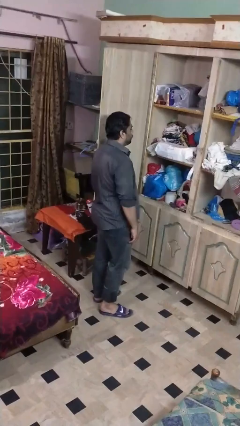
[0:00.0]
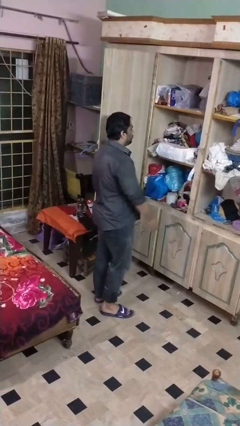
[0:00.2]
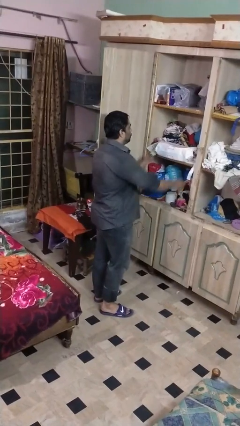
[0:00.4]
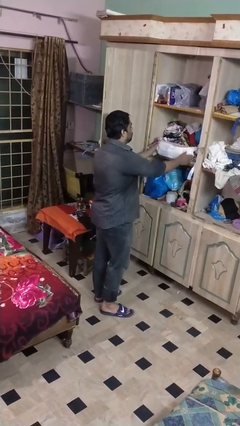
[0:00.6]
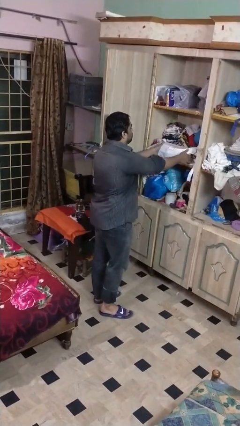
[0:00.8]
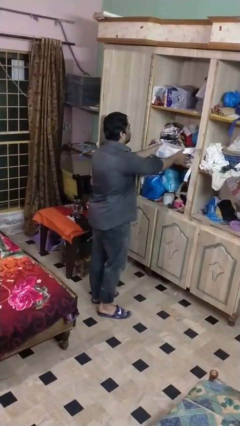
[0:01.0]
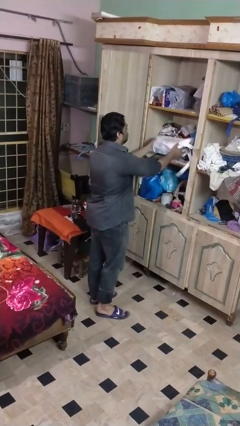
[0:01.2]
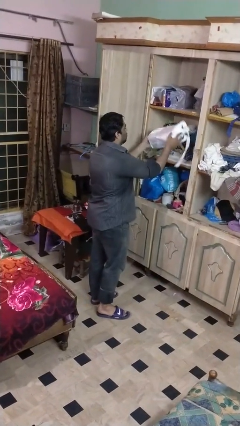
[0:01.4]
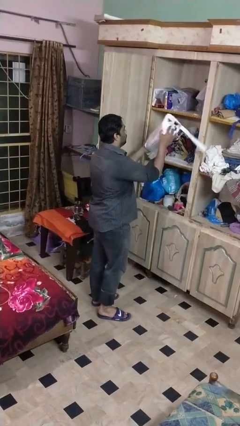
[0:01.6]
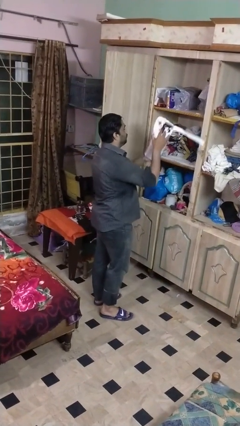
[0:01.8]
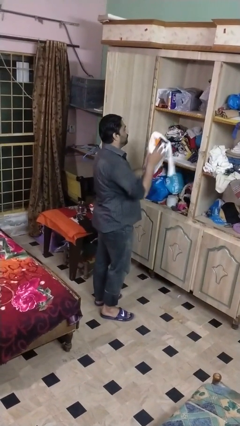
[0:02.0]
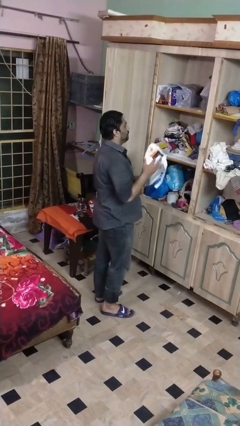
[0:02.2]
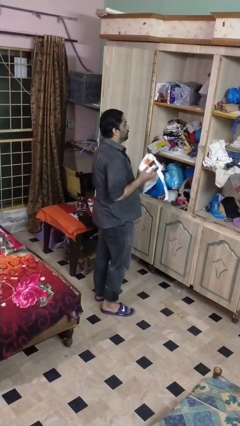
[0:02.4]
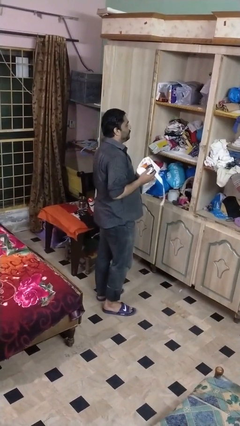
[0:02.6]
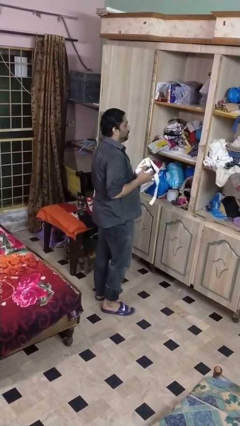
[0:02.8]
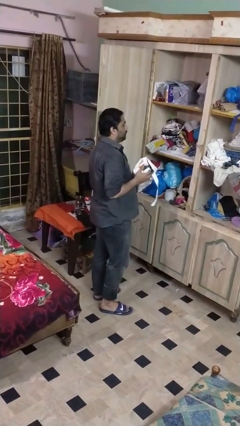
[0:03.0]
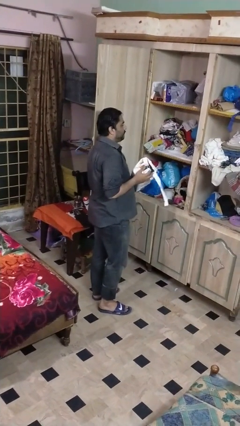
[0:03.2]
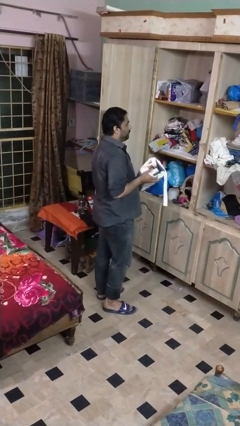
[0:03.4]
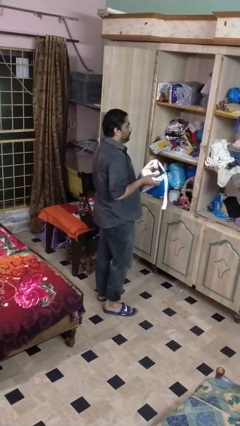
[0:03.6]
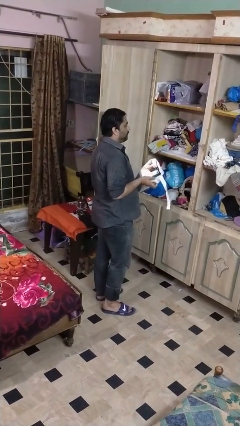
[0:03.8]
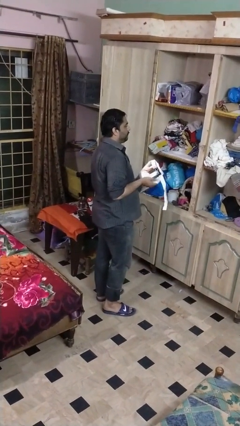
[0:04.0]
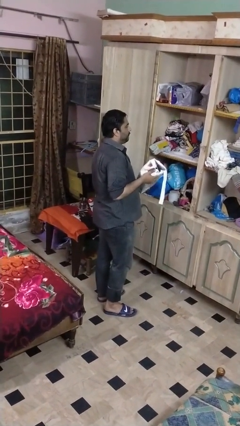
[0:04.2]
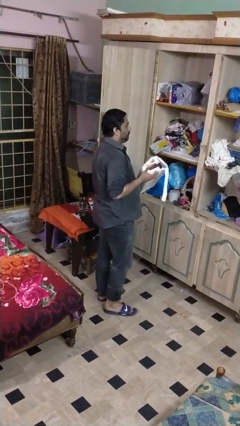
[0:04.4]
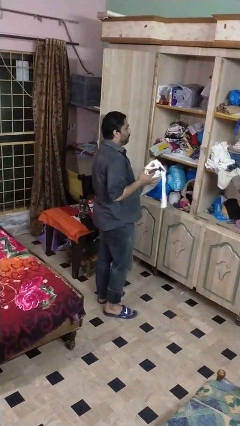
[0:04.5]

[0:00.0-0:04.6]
person picks up object from cabinet

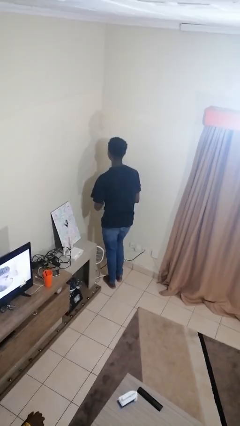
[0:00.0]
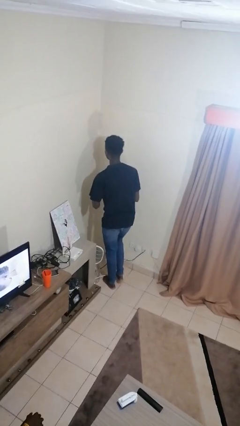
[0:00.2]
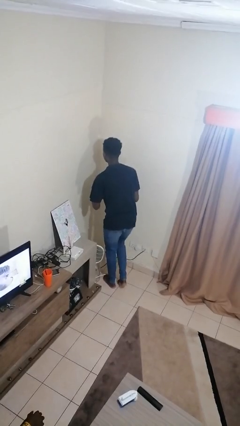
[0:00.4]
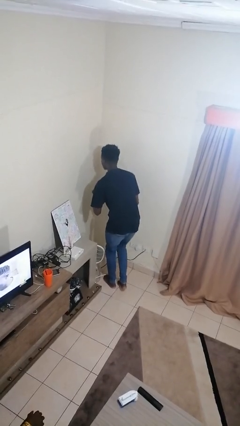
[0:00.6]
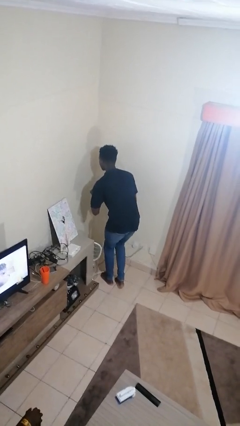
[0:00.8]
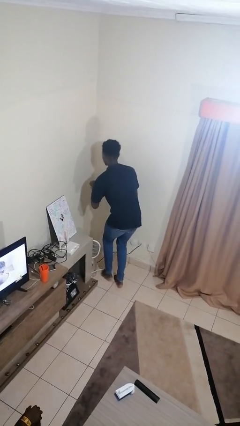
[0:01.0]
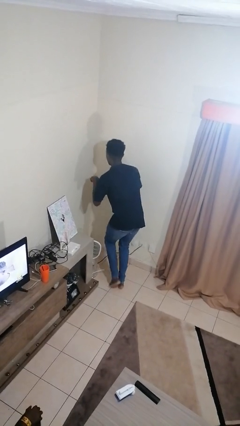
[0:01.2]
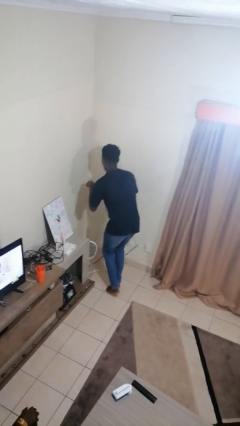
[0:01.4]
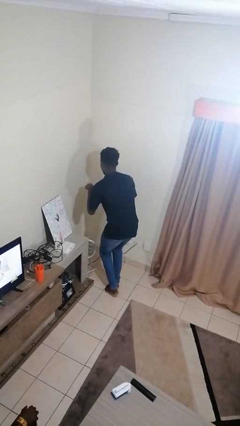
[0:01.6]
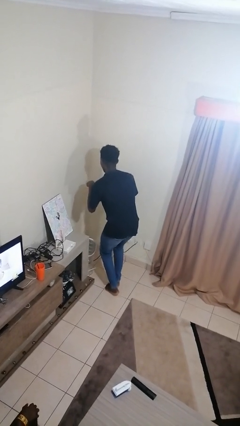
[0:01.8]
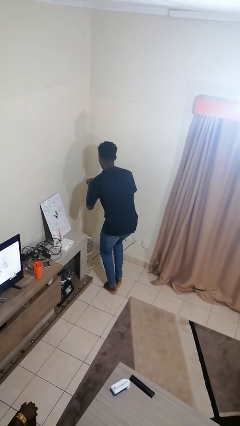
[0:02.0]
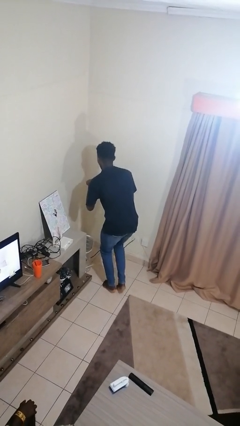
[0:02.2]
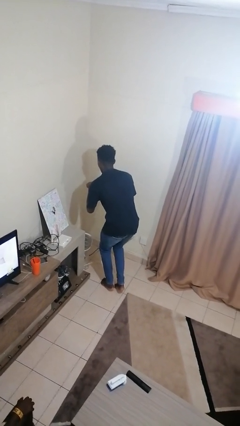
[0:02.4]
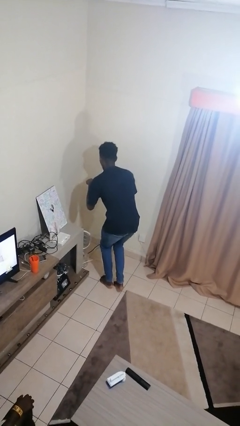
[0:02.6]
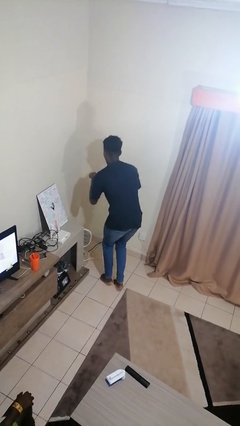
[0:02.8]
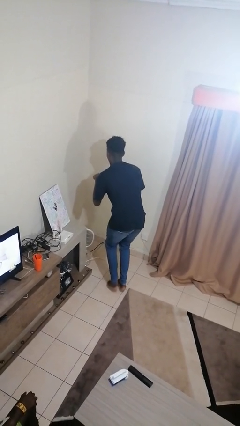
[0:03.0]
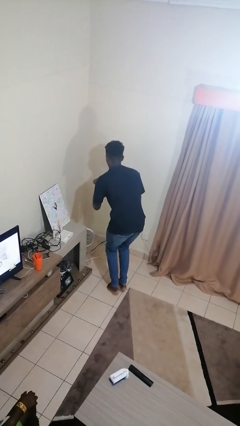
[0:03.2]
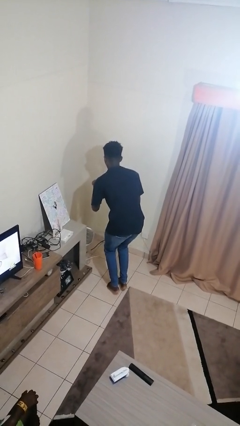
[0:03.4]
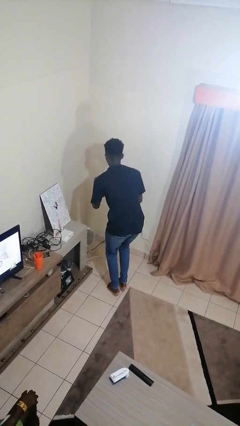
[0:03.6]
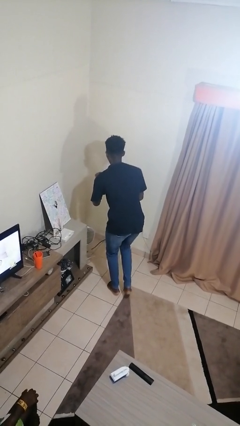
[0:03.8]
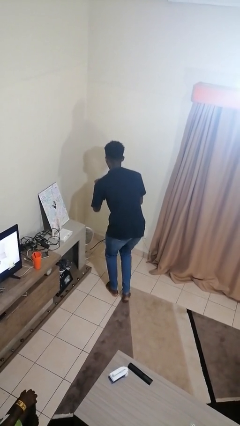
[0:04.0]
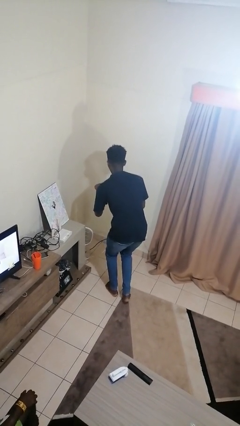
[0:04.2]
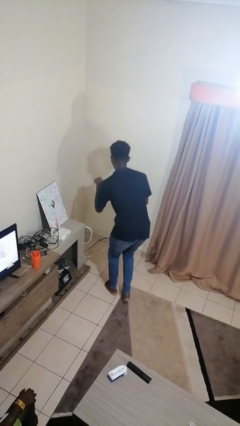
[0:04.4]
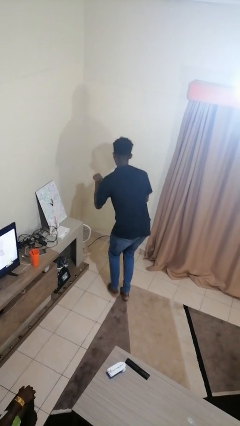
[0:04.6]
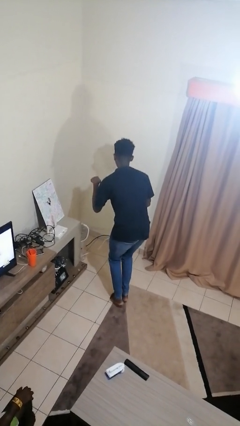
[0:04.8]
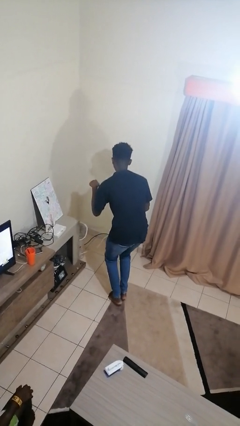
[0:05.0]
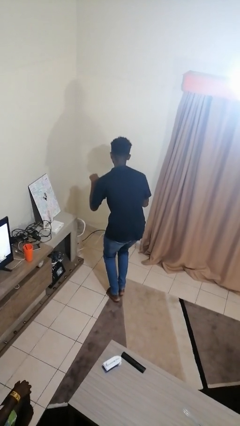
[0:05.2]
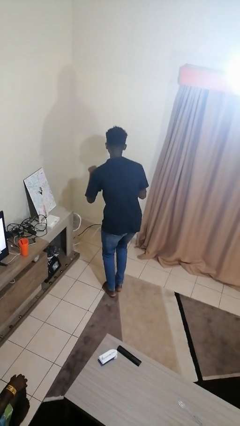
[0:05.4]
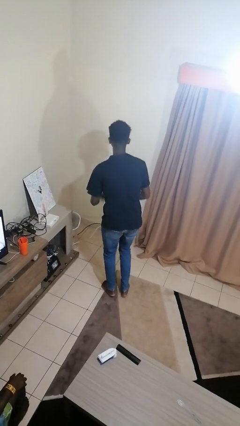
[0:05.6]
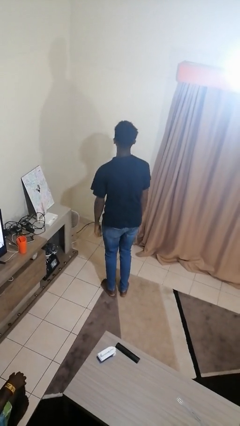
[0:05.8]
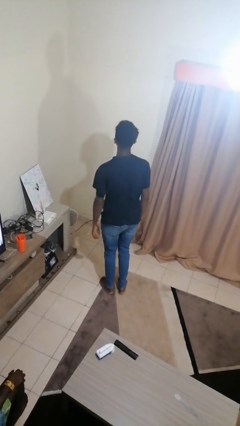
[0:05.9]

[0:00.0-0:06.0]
person walks tiptoe

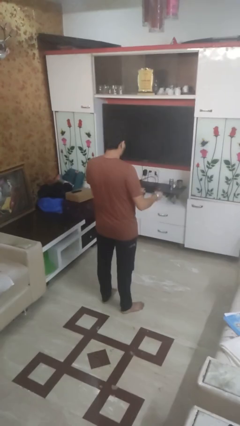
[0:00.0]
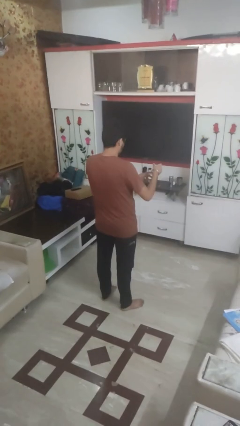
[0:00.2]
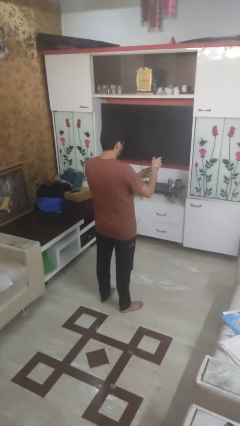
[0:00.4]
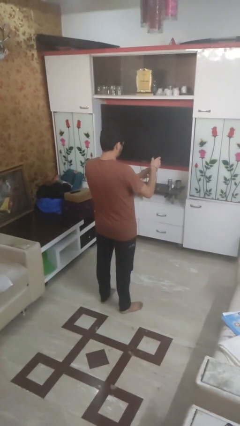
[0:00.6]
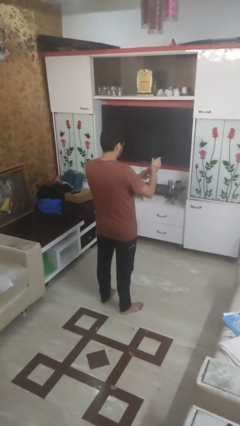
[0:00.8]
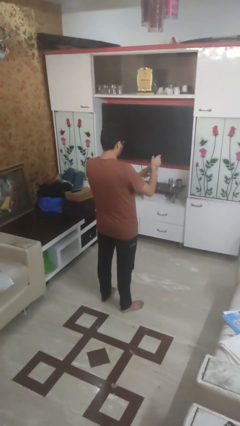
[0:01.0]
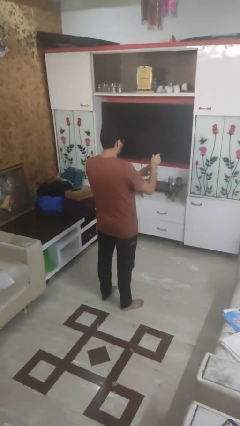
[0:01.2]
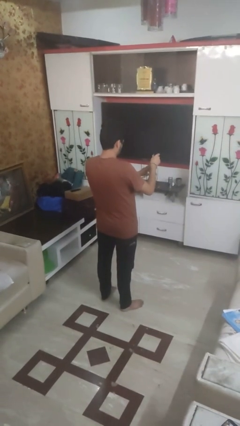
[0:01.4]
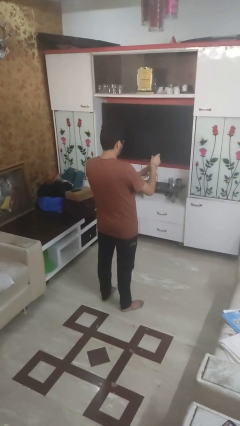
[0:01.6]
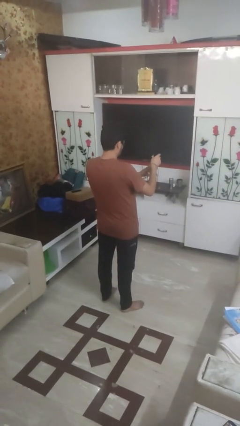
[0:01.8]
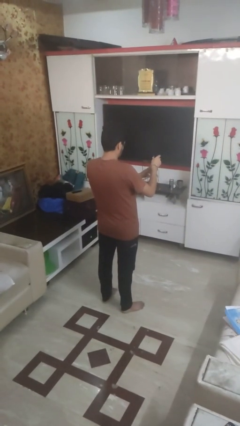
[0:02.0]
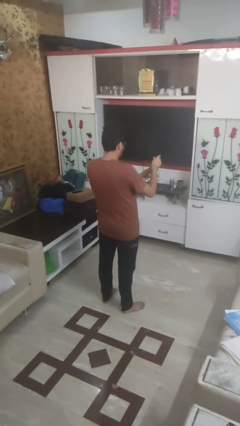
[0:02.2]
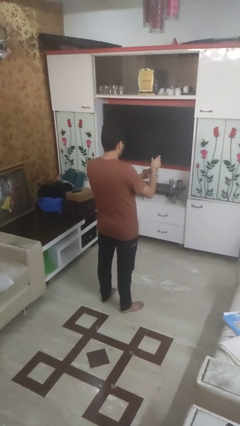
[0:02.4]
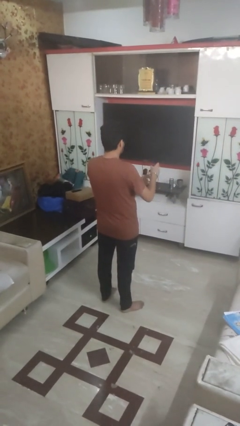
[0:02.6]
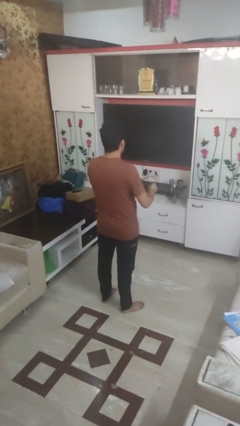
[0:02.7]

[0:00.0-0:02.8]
person clips fingernails

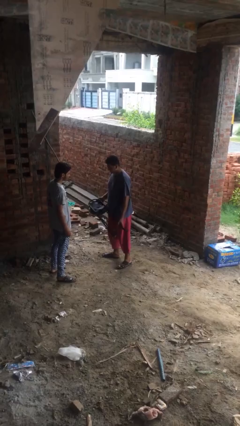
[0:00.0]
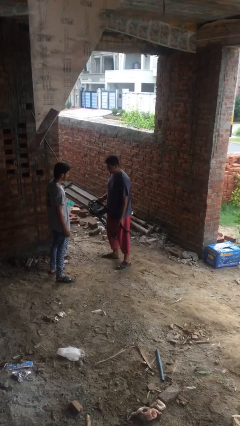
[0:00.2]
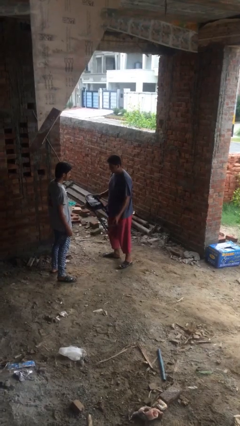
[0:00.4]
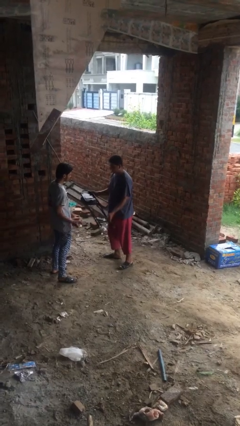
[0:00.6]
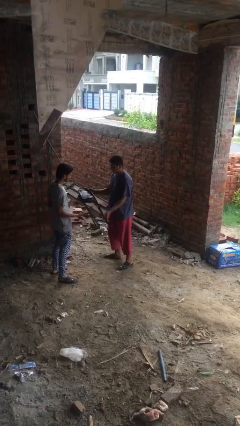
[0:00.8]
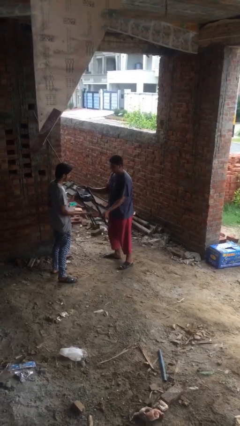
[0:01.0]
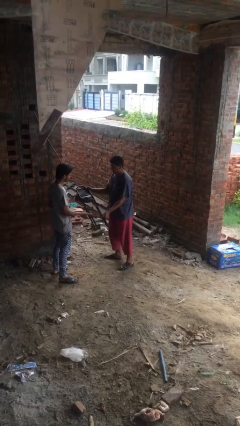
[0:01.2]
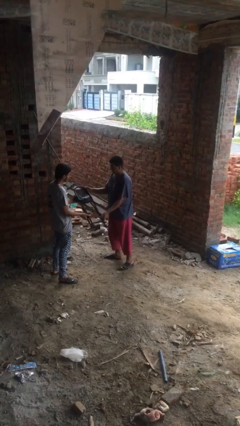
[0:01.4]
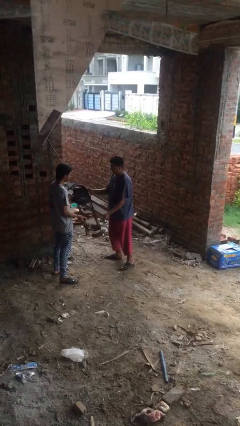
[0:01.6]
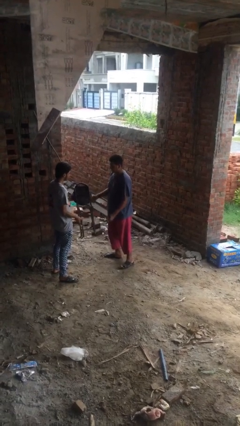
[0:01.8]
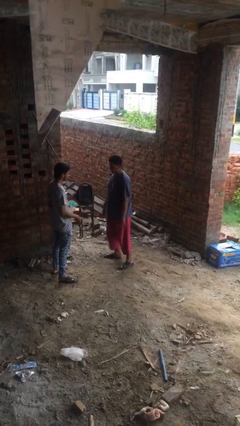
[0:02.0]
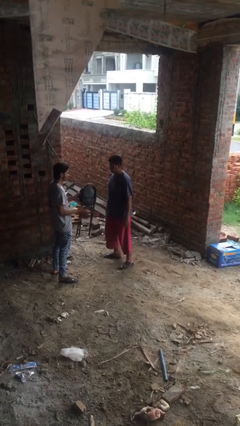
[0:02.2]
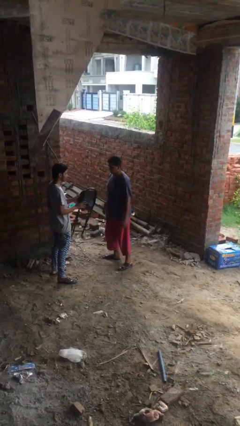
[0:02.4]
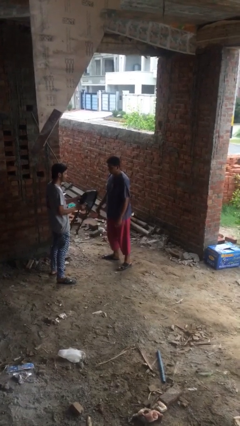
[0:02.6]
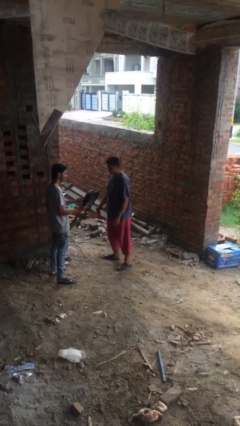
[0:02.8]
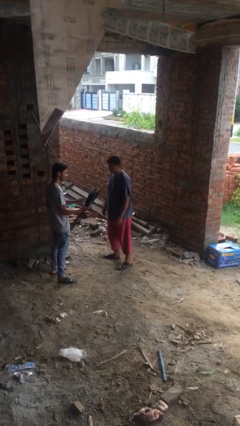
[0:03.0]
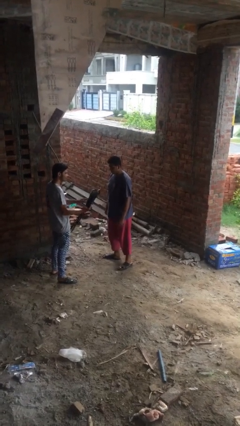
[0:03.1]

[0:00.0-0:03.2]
person transfers object to person

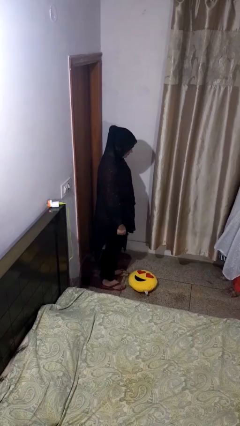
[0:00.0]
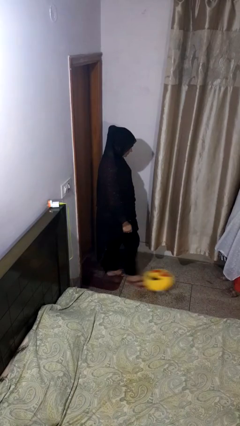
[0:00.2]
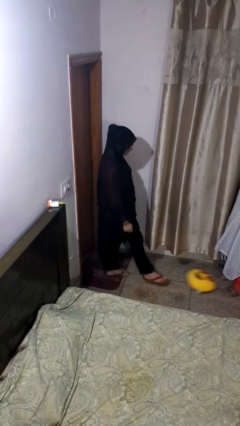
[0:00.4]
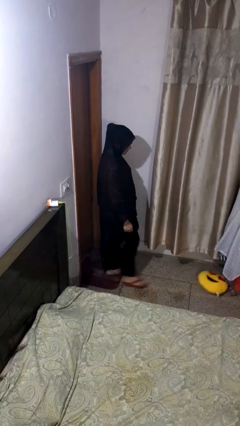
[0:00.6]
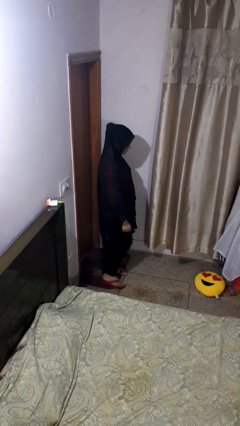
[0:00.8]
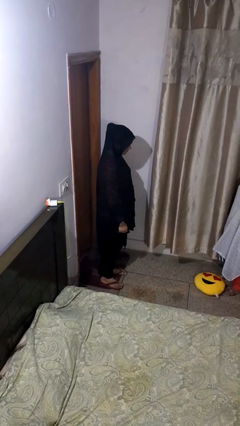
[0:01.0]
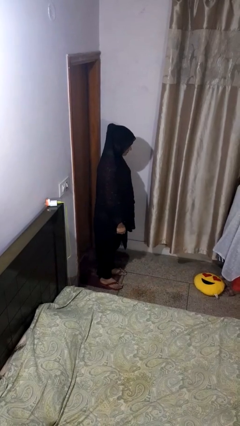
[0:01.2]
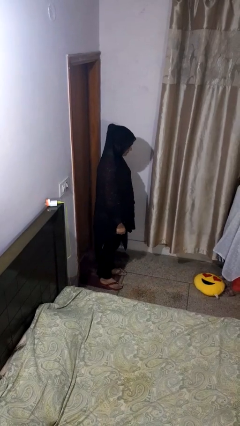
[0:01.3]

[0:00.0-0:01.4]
person kicks object to person
